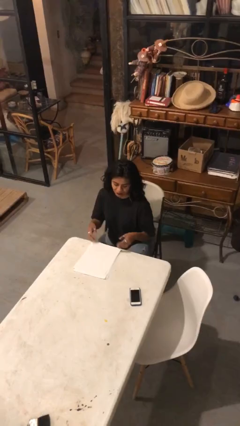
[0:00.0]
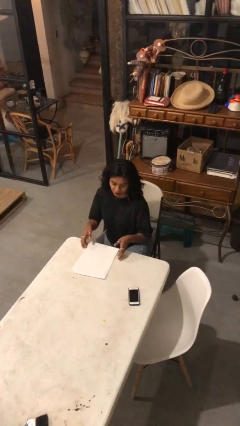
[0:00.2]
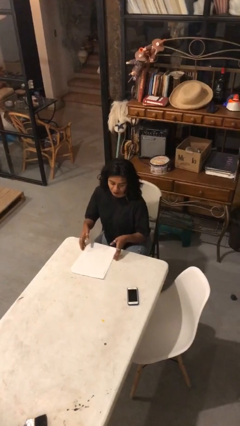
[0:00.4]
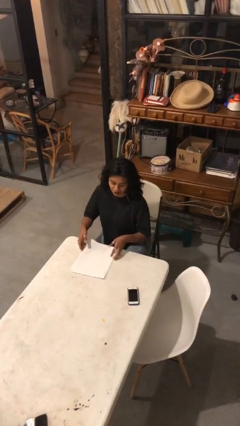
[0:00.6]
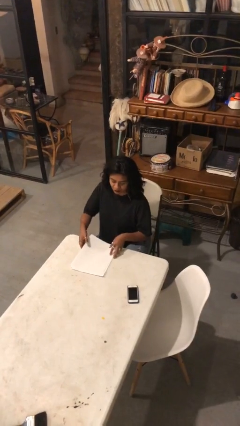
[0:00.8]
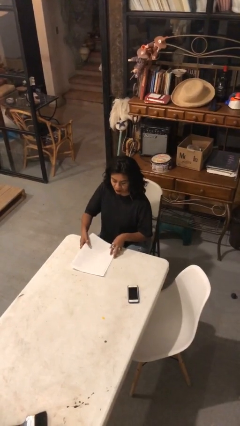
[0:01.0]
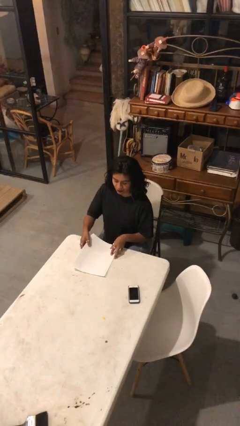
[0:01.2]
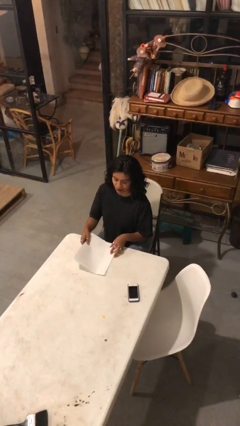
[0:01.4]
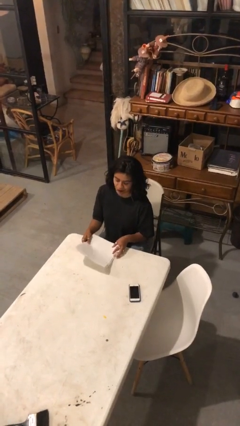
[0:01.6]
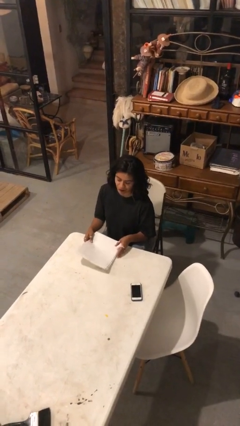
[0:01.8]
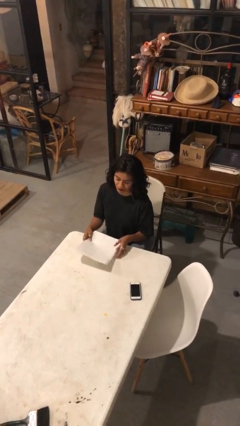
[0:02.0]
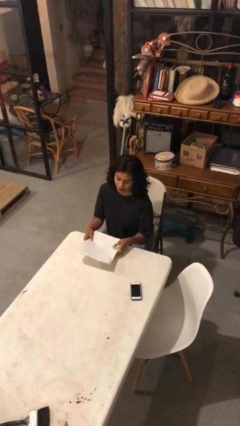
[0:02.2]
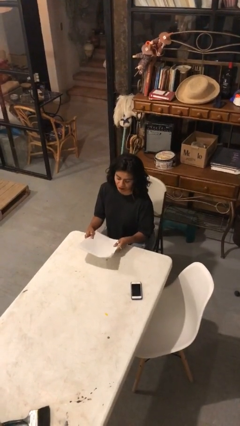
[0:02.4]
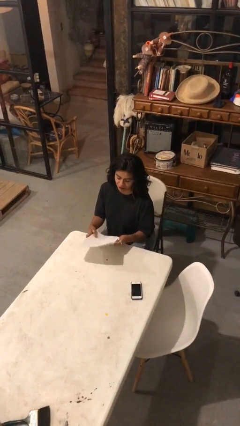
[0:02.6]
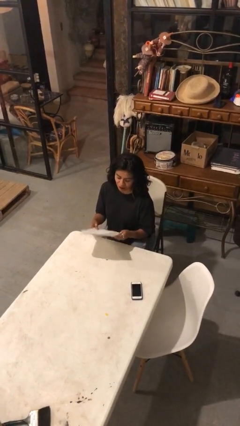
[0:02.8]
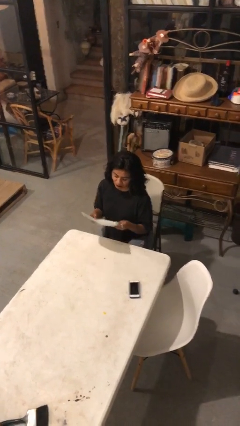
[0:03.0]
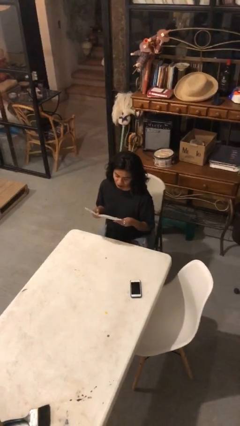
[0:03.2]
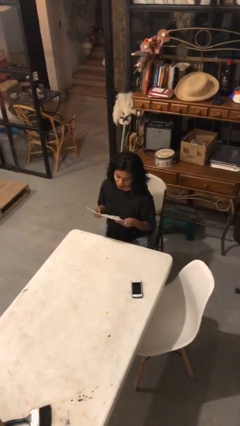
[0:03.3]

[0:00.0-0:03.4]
person picks up object from table

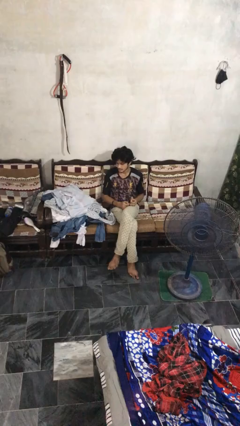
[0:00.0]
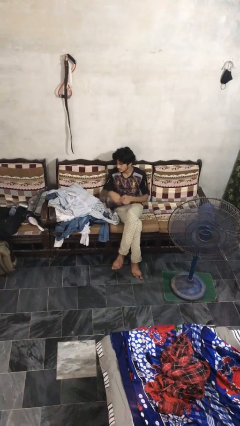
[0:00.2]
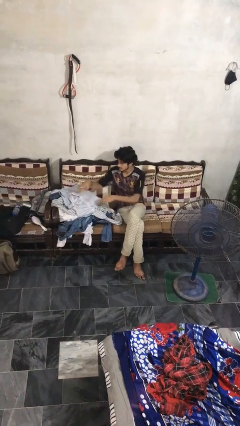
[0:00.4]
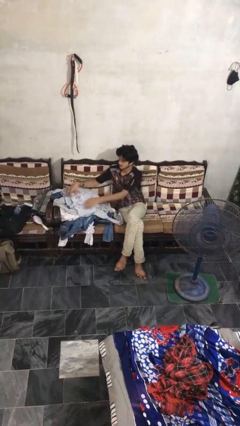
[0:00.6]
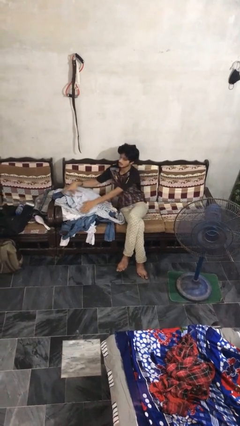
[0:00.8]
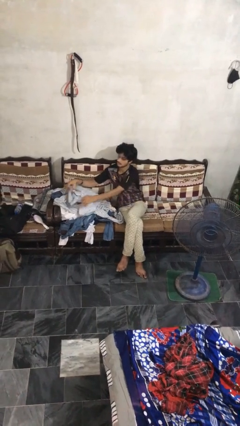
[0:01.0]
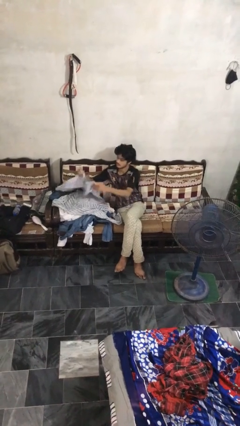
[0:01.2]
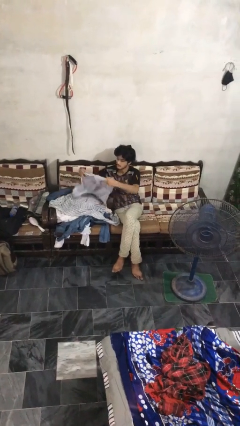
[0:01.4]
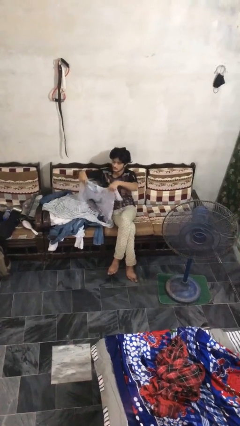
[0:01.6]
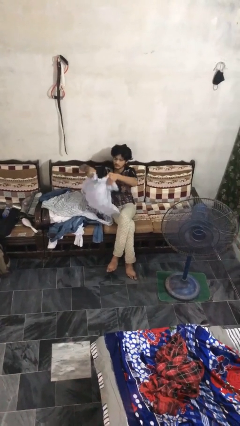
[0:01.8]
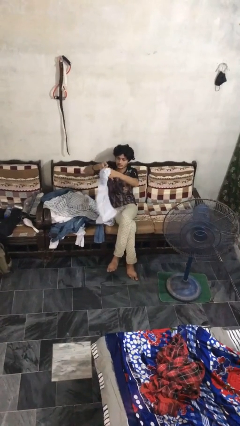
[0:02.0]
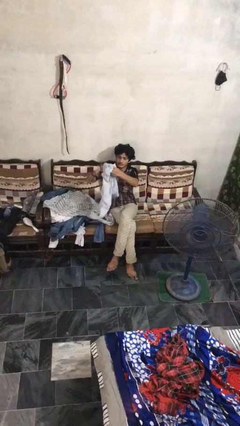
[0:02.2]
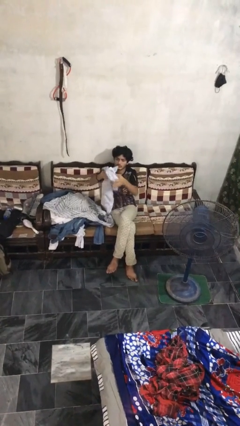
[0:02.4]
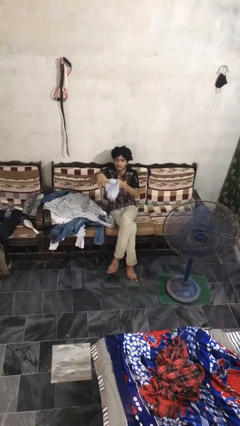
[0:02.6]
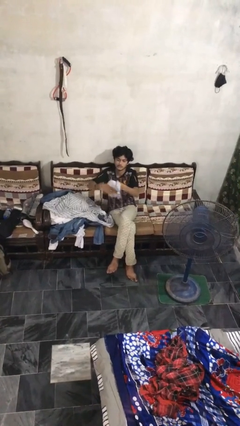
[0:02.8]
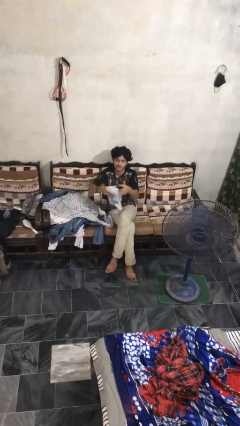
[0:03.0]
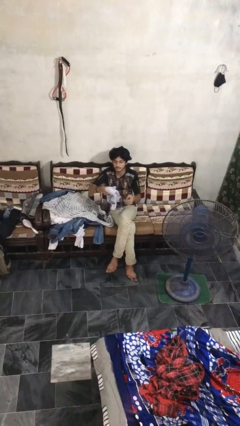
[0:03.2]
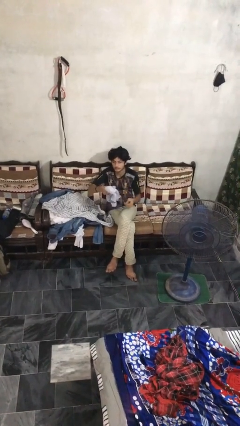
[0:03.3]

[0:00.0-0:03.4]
person folds shirt

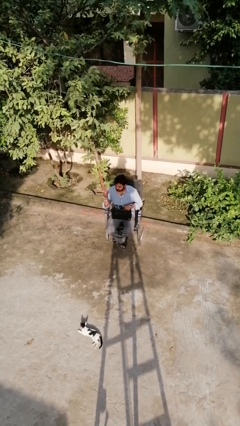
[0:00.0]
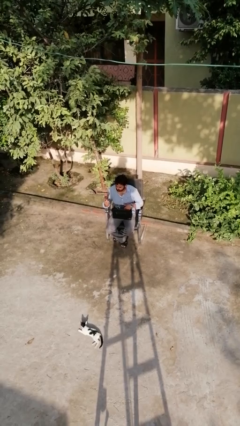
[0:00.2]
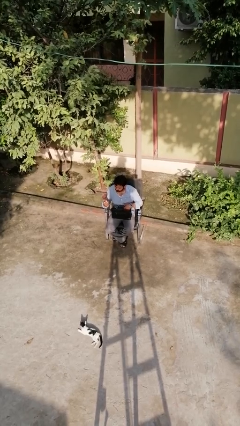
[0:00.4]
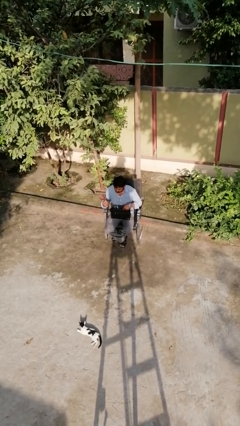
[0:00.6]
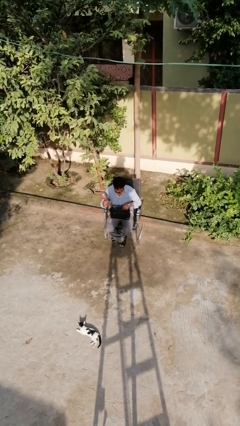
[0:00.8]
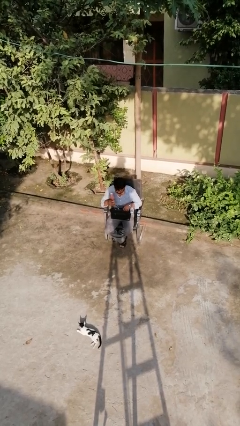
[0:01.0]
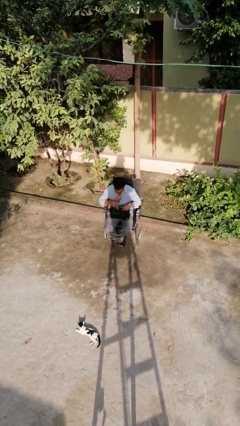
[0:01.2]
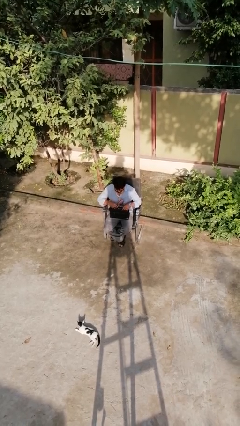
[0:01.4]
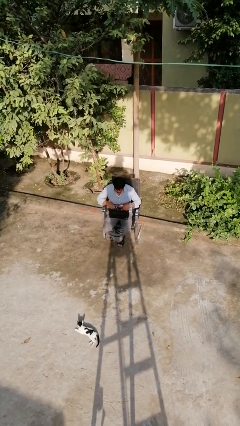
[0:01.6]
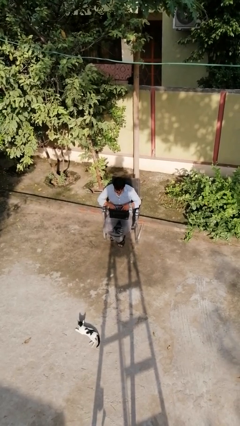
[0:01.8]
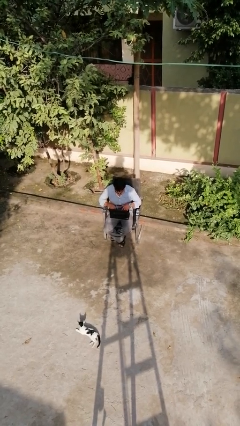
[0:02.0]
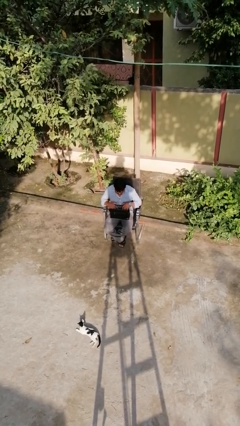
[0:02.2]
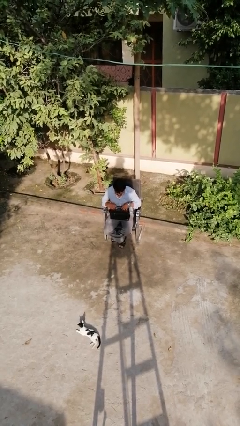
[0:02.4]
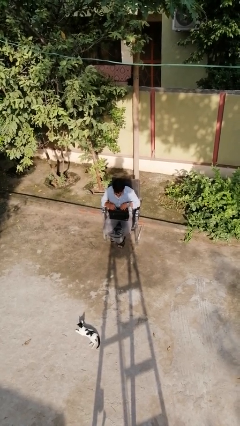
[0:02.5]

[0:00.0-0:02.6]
person puts object into backpack

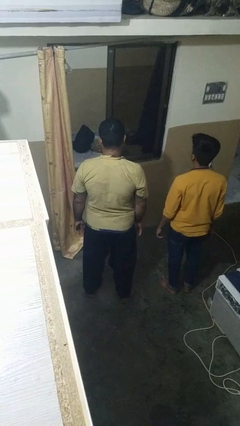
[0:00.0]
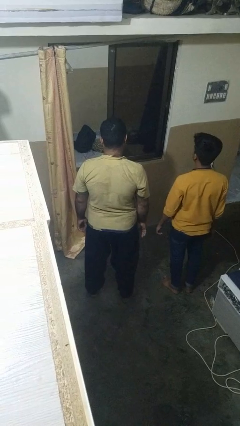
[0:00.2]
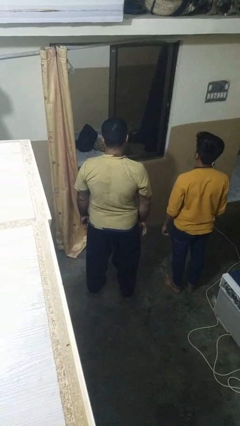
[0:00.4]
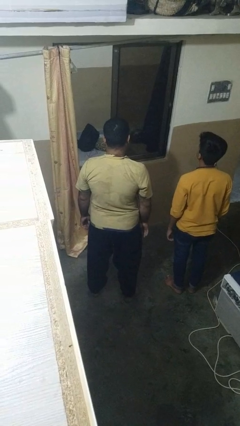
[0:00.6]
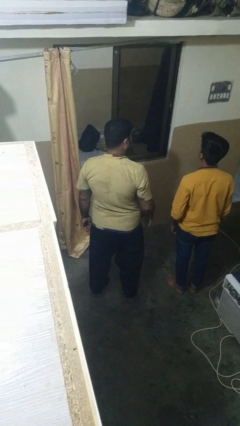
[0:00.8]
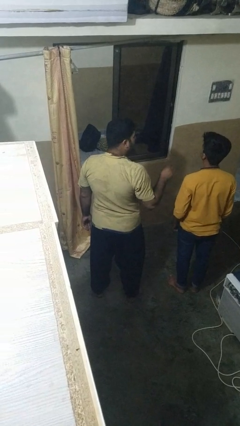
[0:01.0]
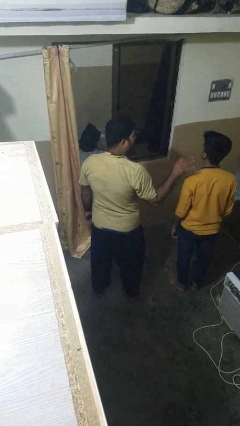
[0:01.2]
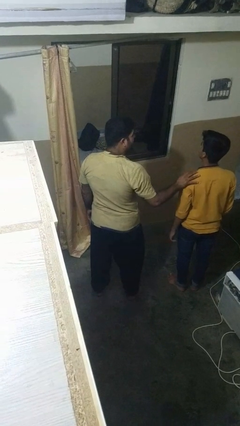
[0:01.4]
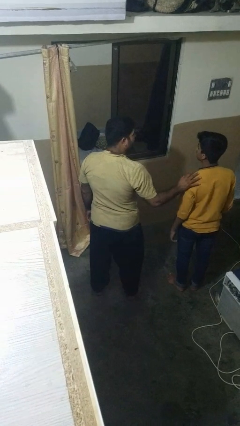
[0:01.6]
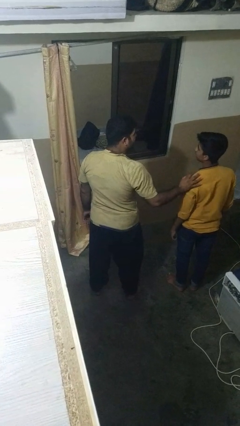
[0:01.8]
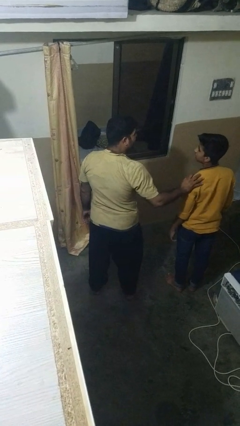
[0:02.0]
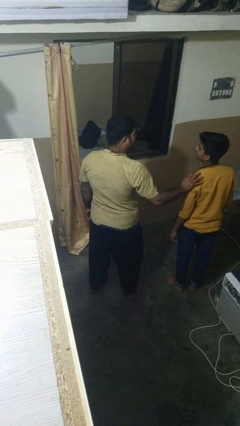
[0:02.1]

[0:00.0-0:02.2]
person pounds shoulders of person

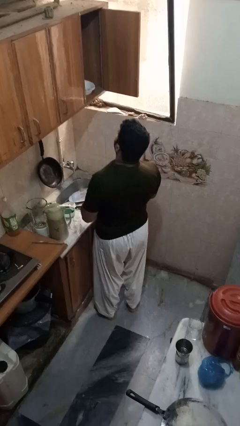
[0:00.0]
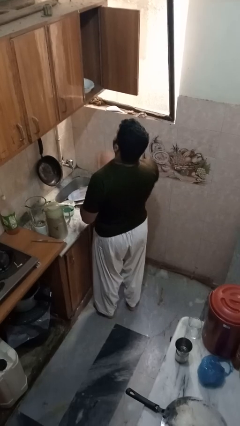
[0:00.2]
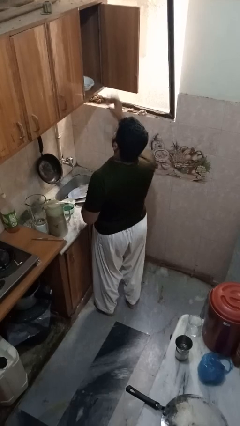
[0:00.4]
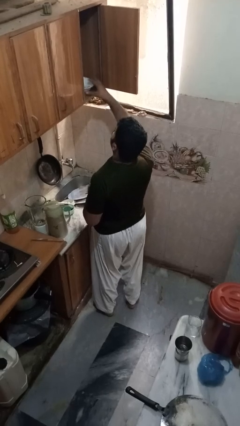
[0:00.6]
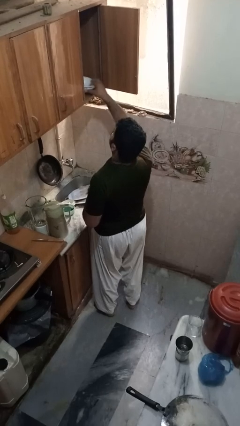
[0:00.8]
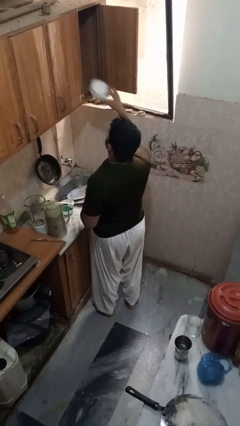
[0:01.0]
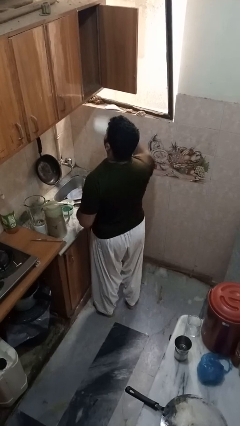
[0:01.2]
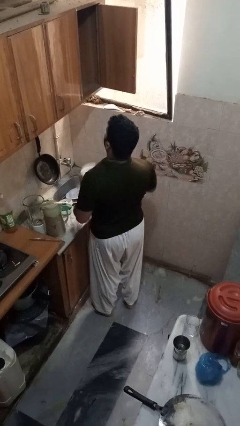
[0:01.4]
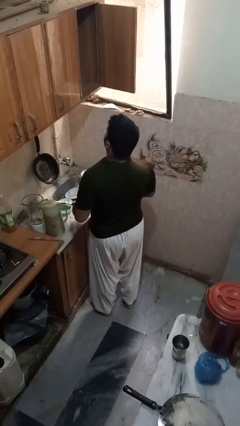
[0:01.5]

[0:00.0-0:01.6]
person takes object from cabinet

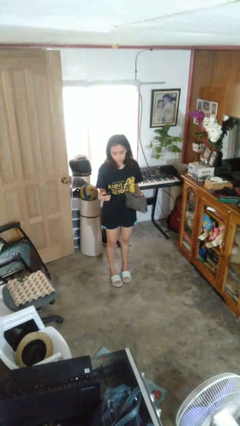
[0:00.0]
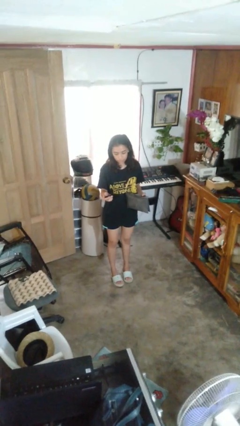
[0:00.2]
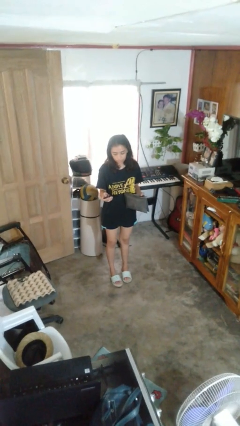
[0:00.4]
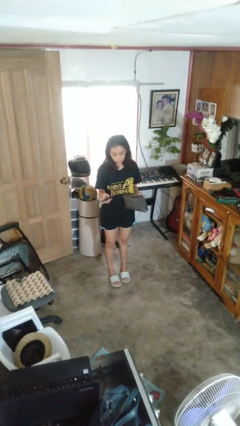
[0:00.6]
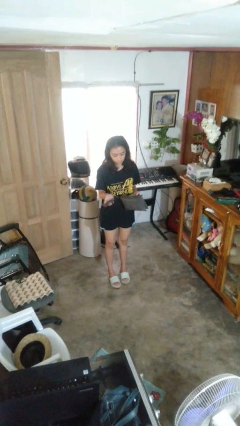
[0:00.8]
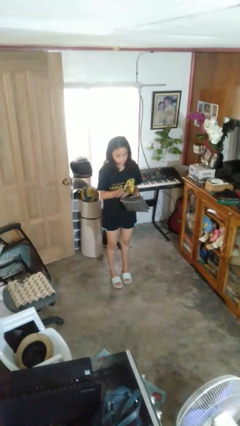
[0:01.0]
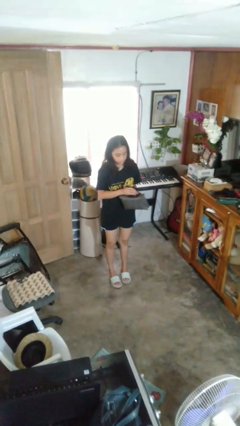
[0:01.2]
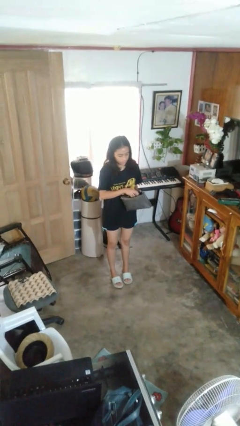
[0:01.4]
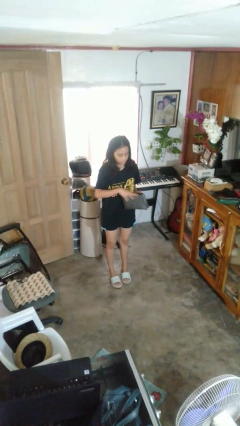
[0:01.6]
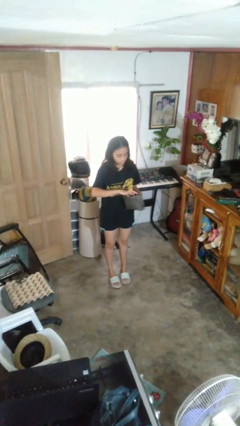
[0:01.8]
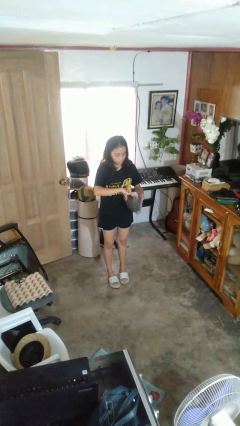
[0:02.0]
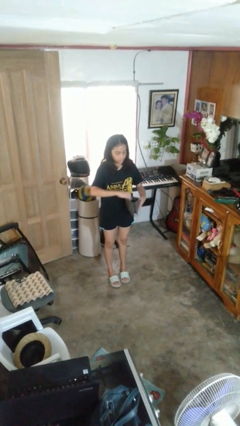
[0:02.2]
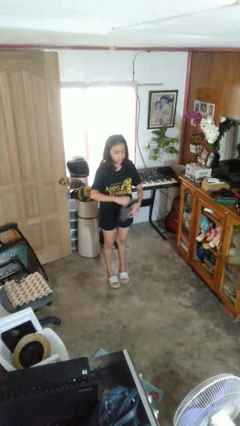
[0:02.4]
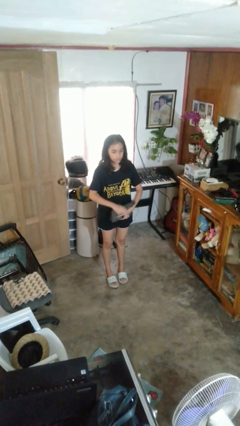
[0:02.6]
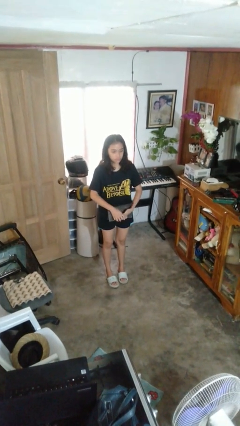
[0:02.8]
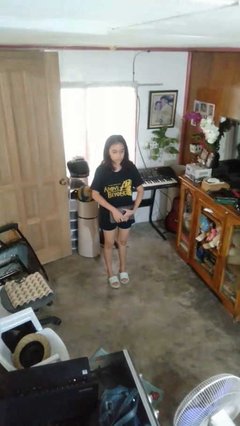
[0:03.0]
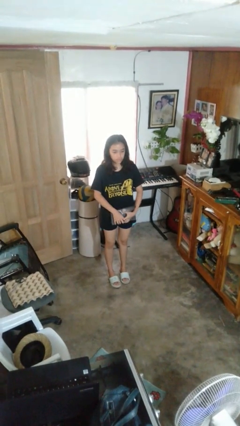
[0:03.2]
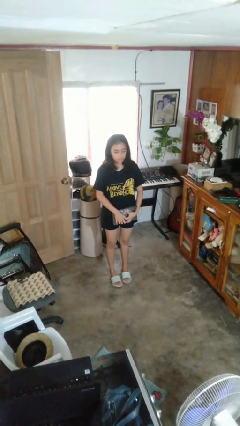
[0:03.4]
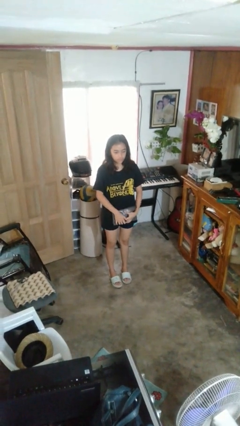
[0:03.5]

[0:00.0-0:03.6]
person puts object into purse

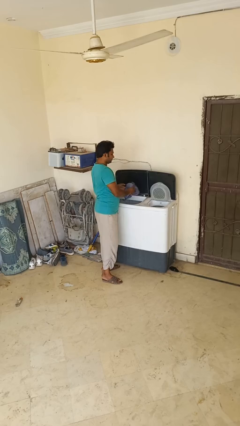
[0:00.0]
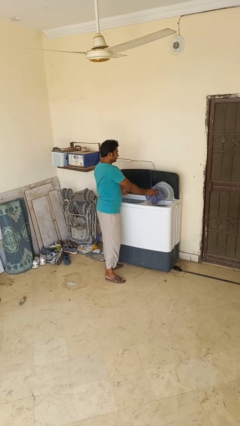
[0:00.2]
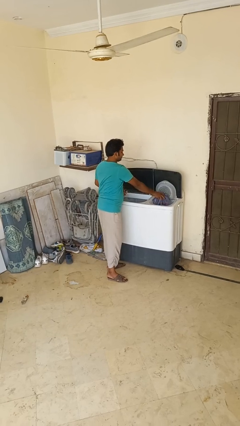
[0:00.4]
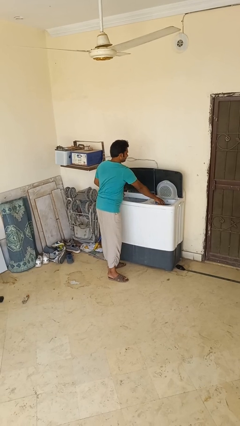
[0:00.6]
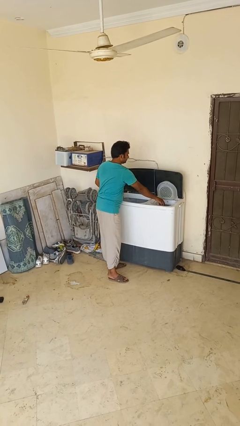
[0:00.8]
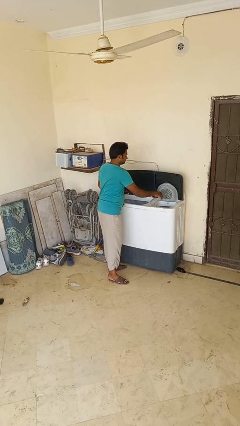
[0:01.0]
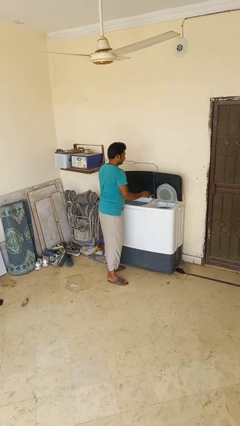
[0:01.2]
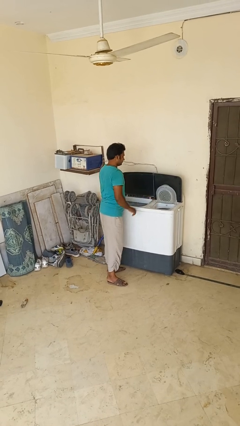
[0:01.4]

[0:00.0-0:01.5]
person loads dryer
